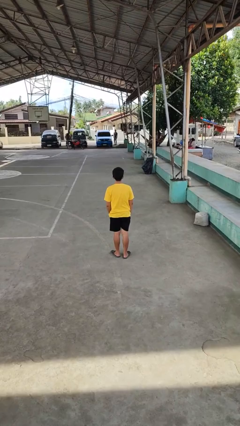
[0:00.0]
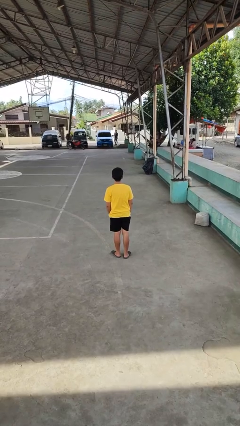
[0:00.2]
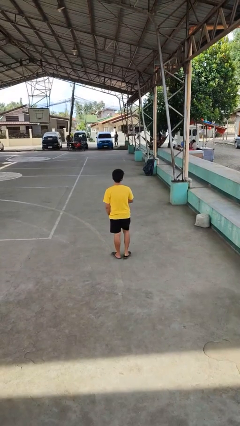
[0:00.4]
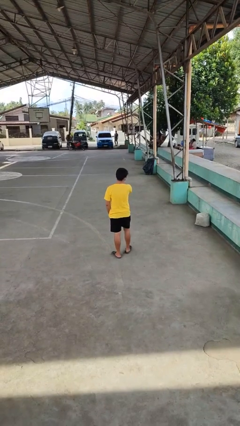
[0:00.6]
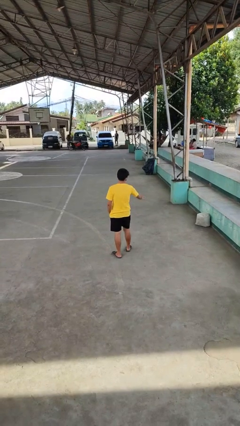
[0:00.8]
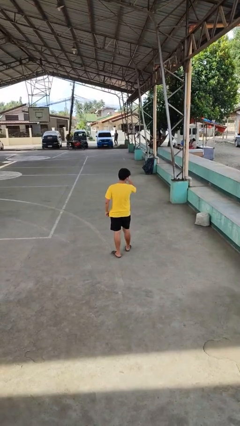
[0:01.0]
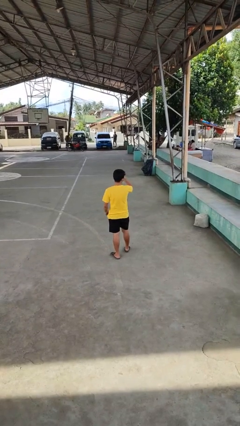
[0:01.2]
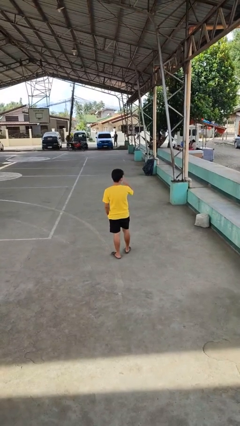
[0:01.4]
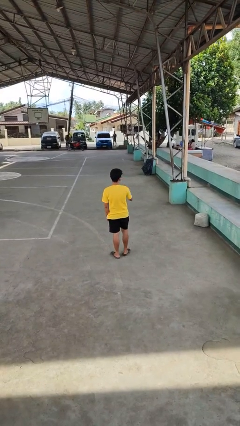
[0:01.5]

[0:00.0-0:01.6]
person karate chop

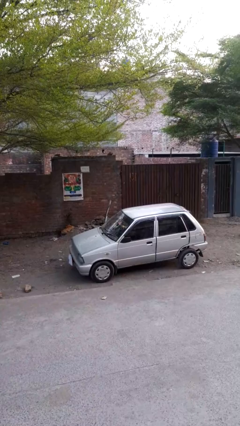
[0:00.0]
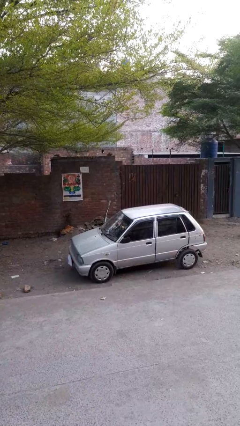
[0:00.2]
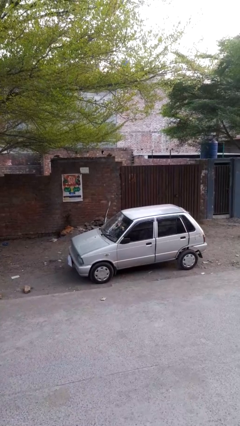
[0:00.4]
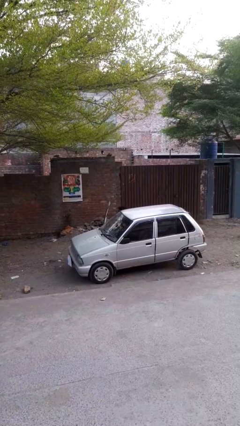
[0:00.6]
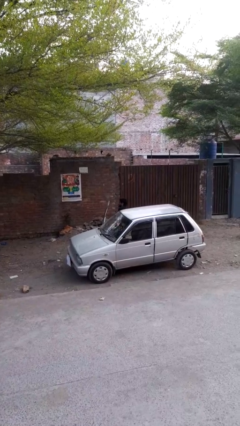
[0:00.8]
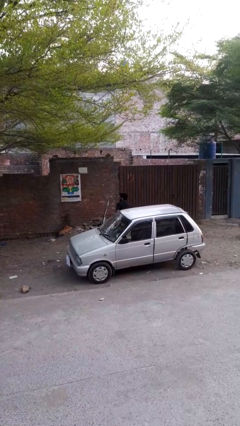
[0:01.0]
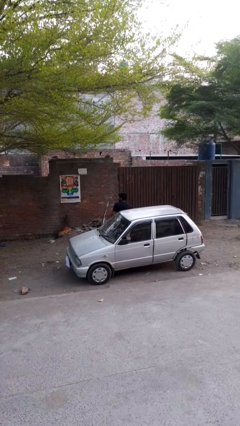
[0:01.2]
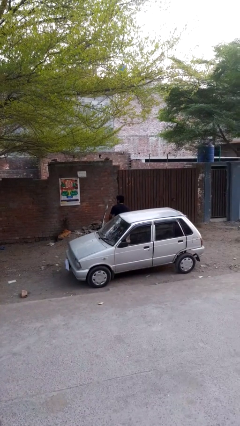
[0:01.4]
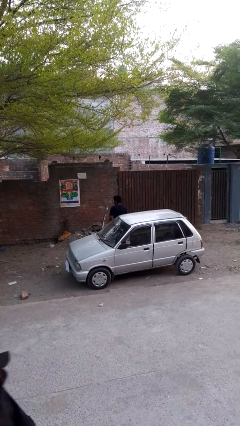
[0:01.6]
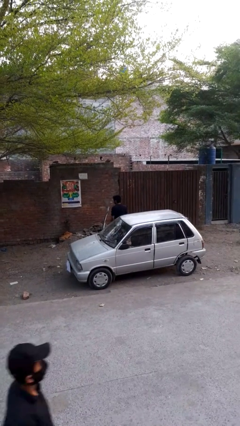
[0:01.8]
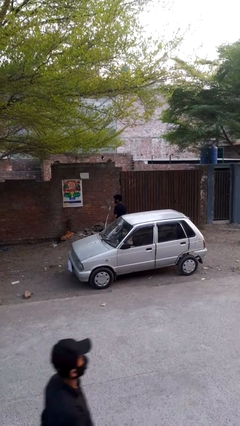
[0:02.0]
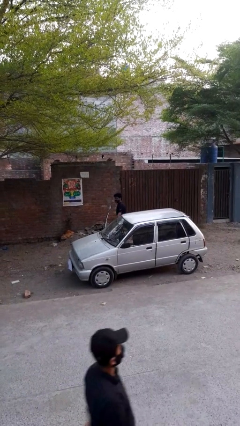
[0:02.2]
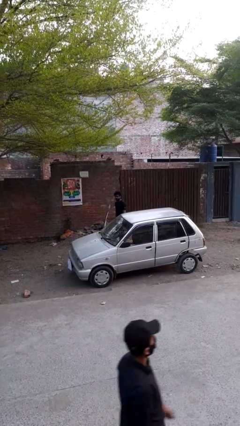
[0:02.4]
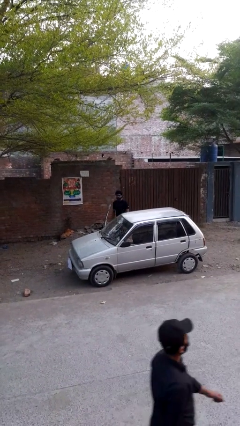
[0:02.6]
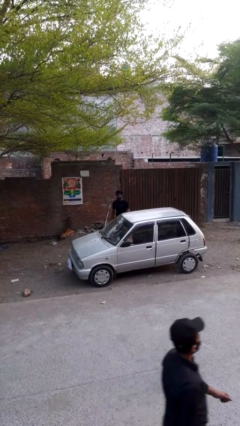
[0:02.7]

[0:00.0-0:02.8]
person exits car

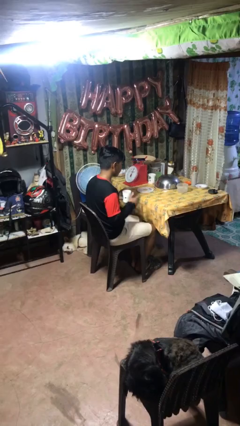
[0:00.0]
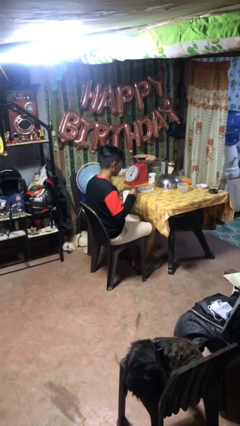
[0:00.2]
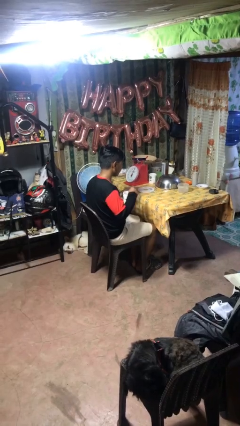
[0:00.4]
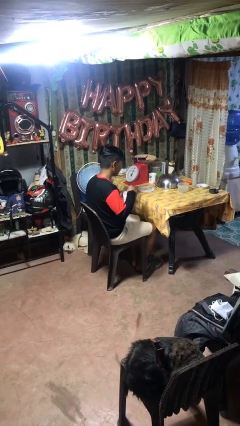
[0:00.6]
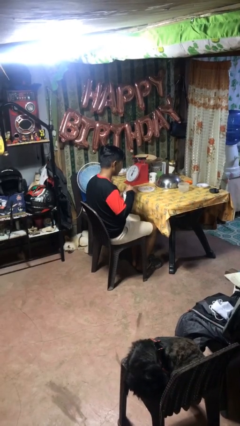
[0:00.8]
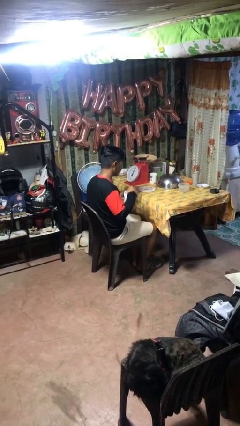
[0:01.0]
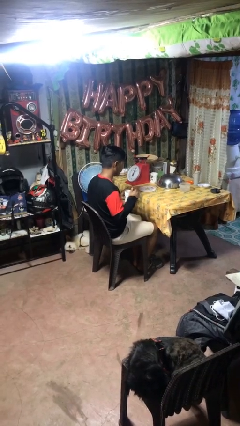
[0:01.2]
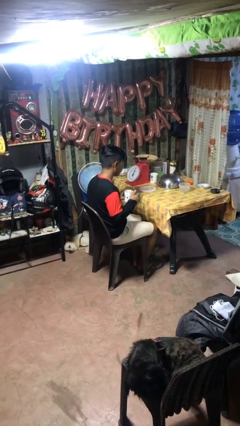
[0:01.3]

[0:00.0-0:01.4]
person stirs mug

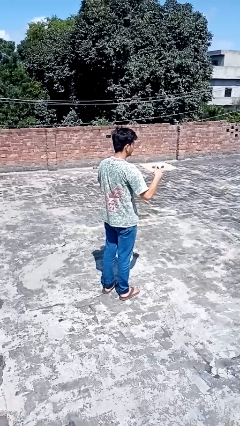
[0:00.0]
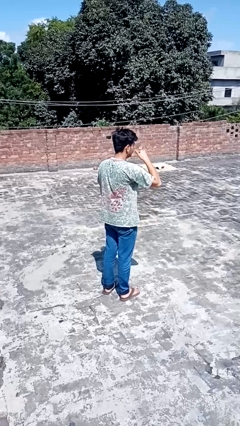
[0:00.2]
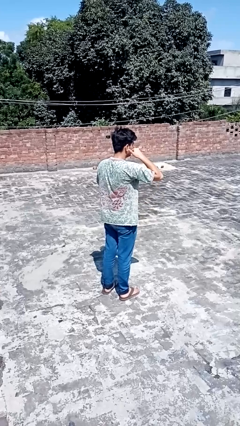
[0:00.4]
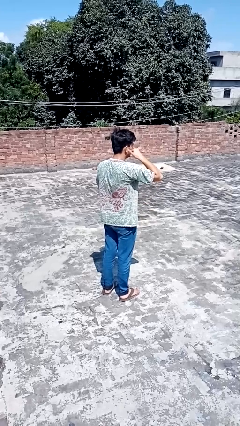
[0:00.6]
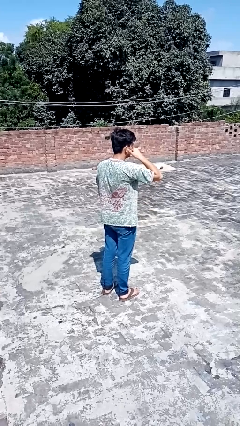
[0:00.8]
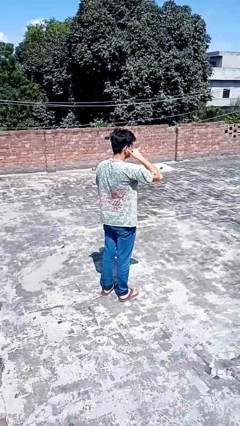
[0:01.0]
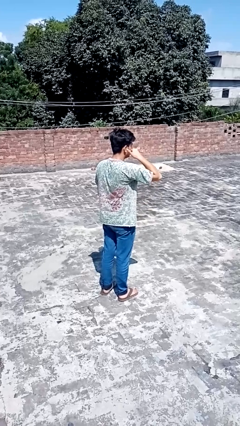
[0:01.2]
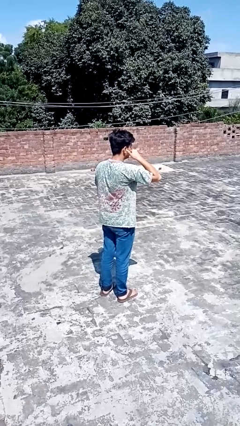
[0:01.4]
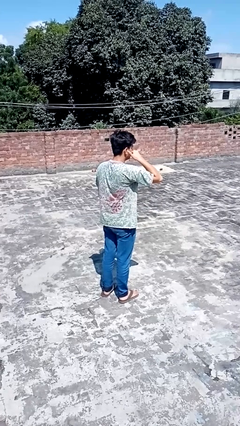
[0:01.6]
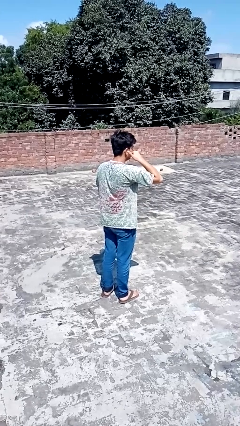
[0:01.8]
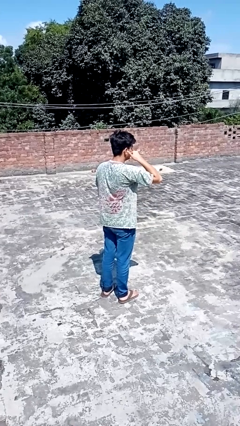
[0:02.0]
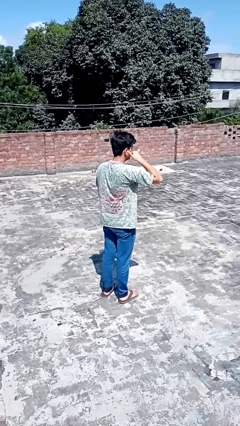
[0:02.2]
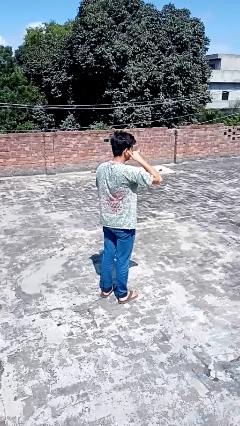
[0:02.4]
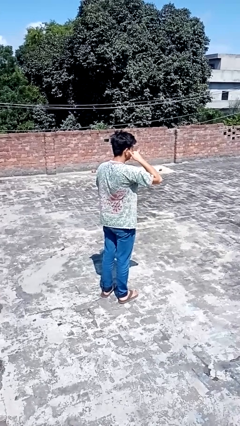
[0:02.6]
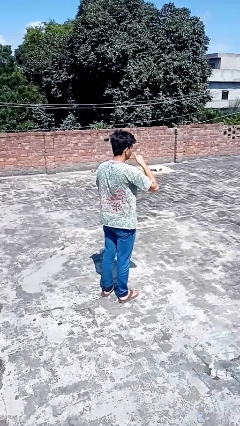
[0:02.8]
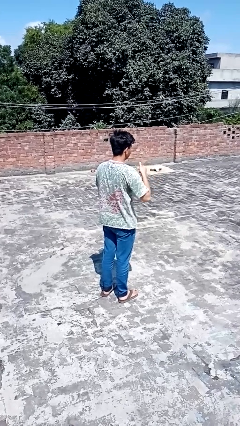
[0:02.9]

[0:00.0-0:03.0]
person gestures call me

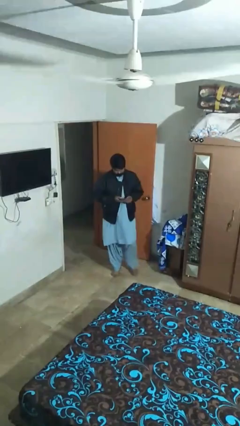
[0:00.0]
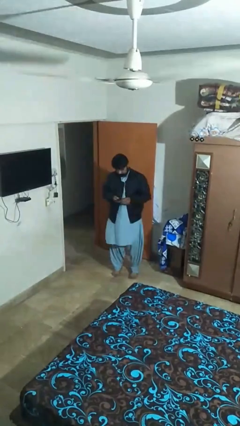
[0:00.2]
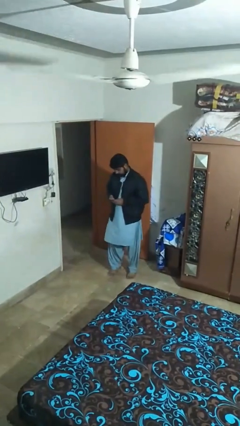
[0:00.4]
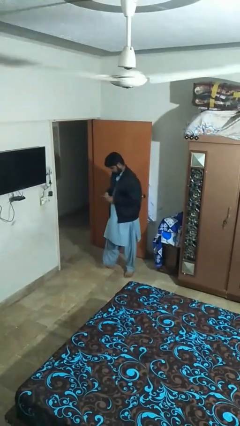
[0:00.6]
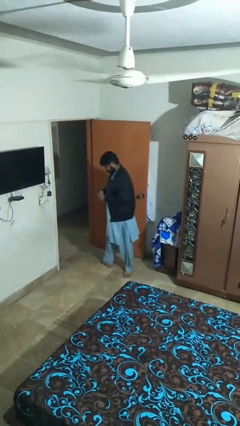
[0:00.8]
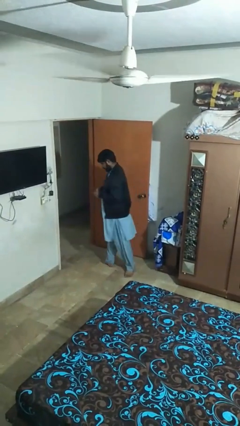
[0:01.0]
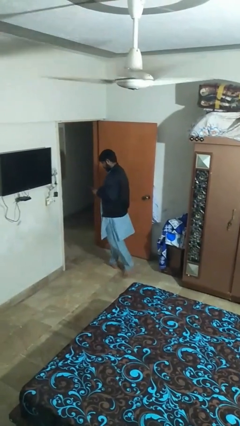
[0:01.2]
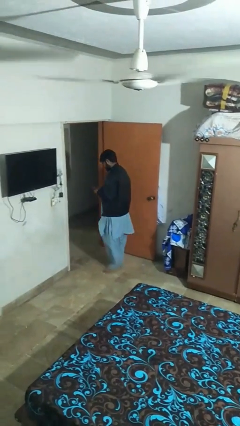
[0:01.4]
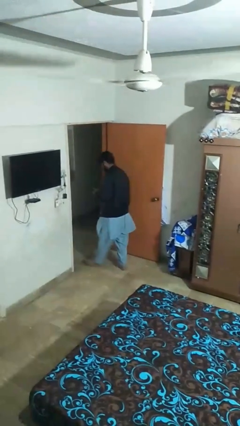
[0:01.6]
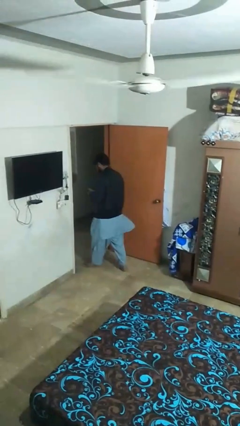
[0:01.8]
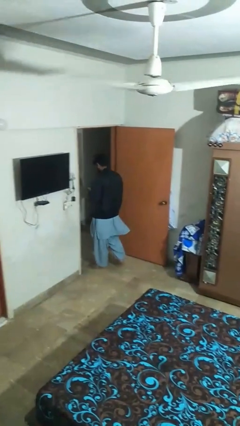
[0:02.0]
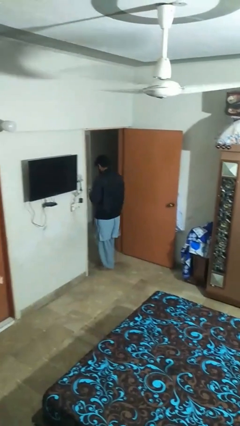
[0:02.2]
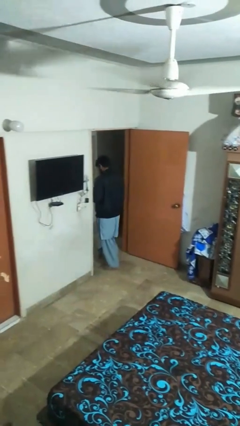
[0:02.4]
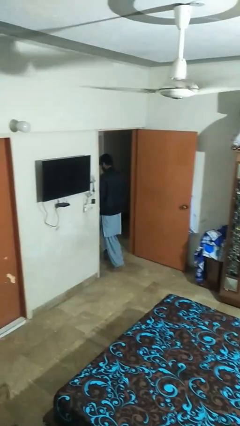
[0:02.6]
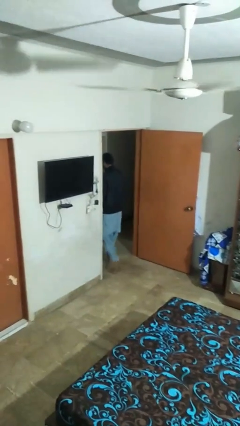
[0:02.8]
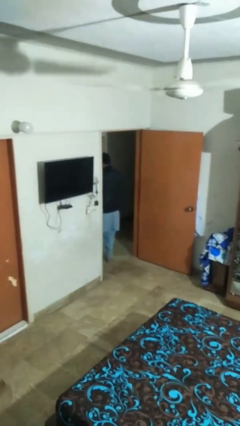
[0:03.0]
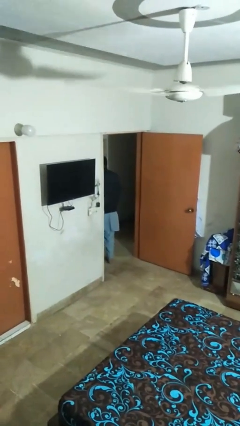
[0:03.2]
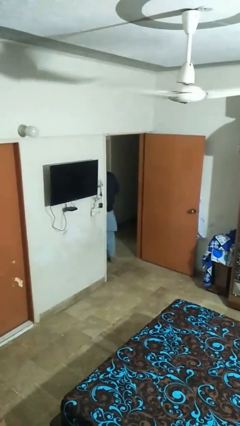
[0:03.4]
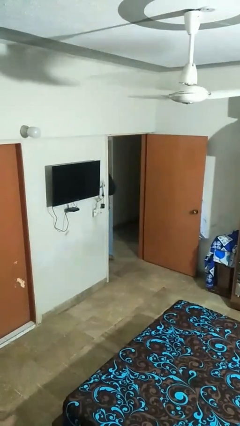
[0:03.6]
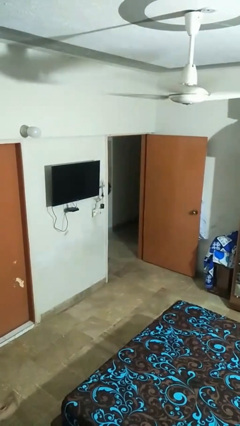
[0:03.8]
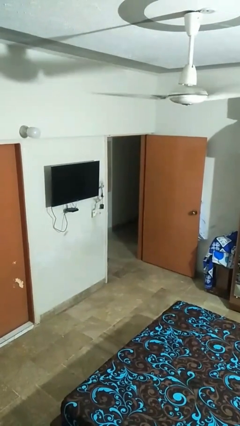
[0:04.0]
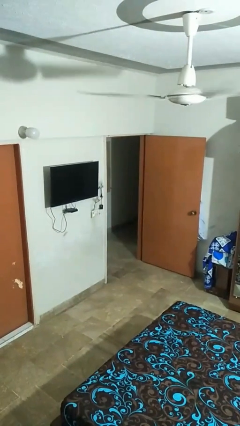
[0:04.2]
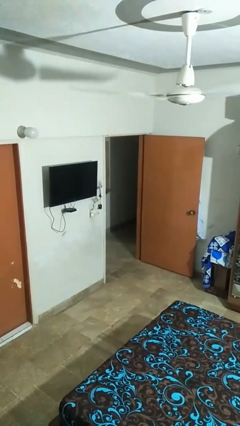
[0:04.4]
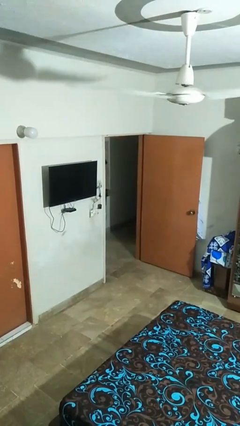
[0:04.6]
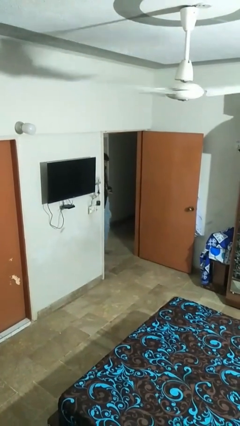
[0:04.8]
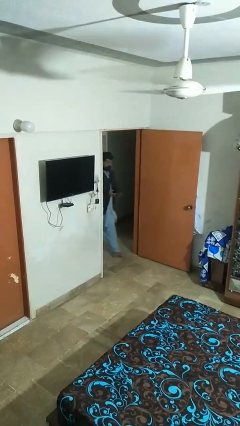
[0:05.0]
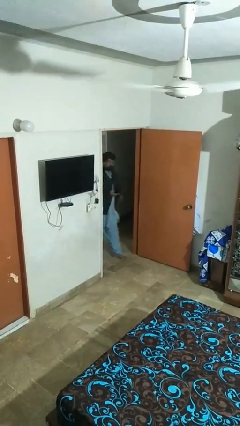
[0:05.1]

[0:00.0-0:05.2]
person exits scene through structure

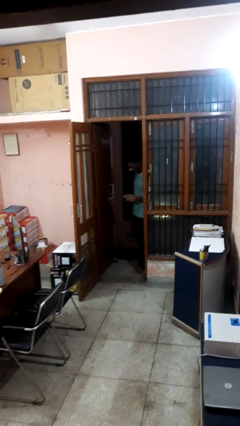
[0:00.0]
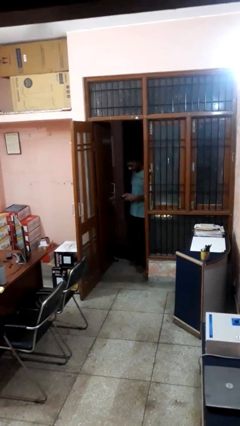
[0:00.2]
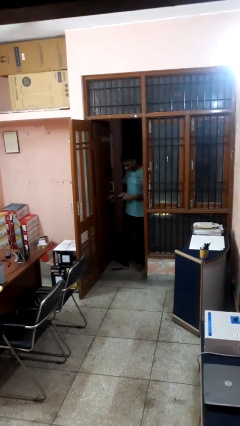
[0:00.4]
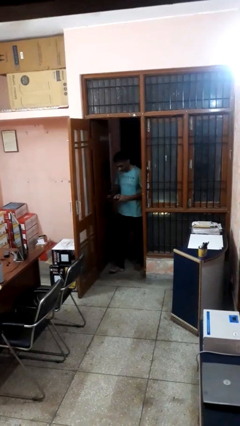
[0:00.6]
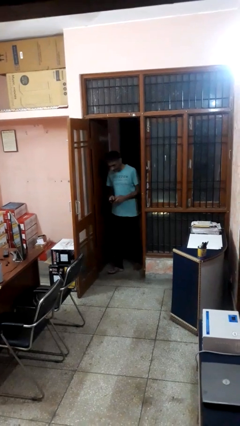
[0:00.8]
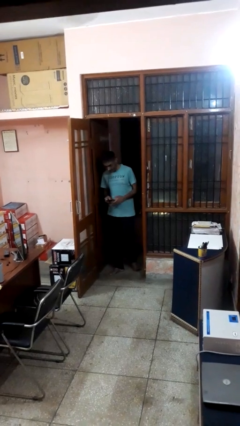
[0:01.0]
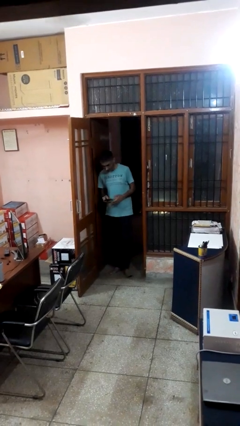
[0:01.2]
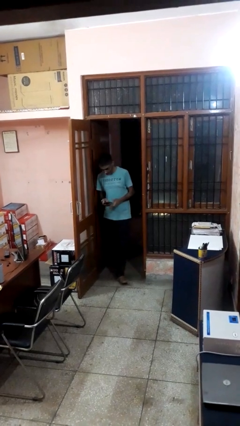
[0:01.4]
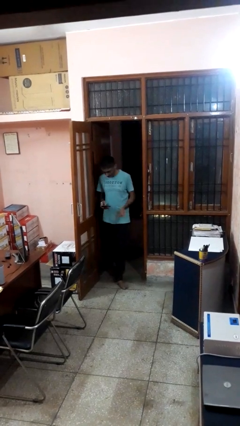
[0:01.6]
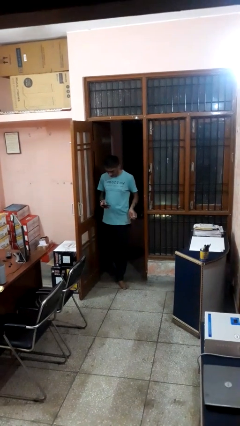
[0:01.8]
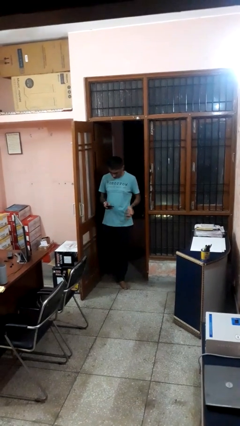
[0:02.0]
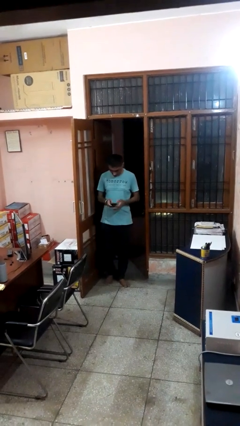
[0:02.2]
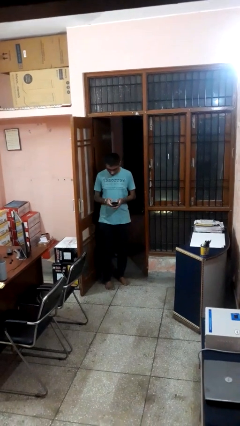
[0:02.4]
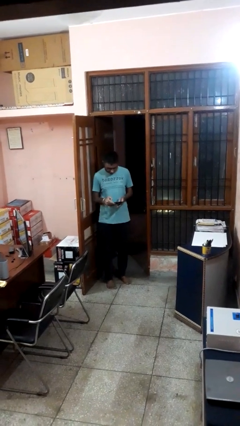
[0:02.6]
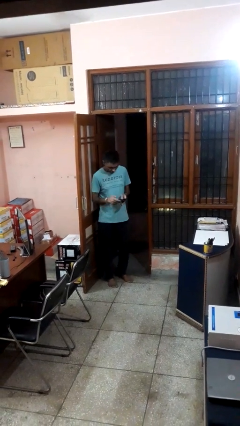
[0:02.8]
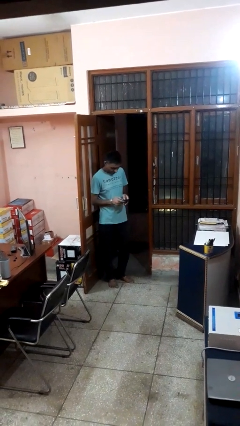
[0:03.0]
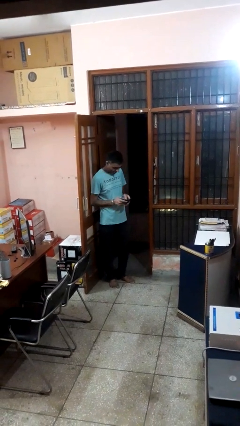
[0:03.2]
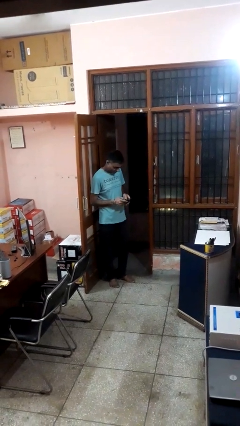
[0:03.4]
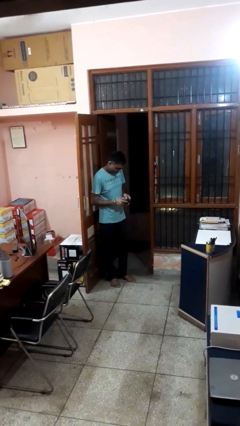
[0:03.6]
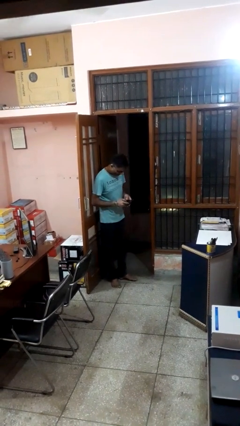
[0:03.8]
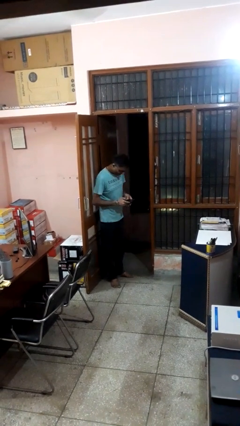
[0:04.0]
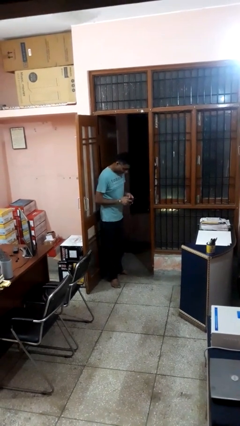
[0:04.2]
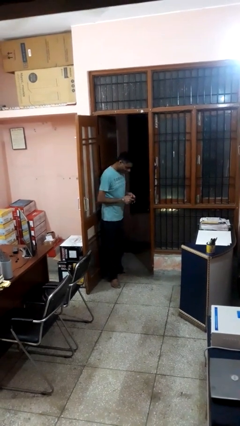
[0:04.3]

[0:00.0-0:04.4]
person enters scene through structure
